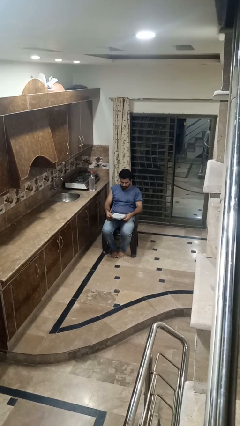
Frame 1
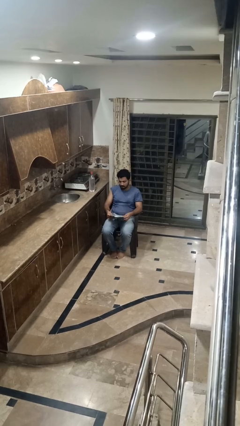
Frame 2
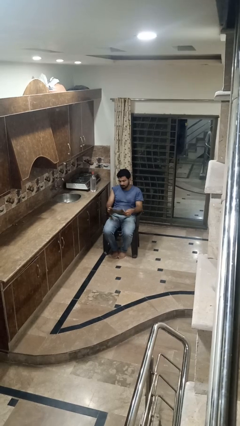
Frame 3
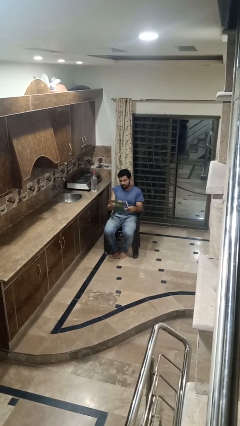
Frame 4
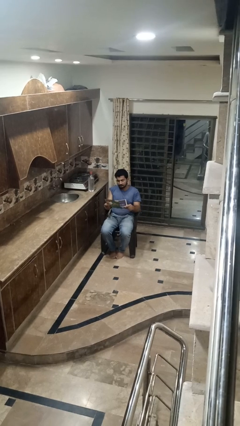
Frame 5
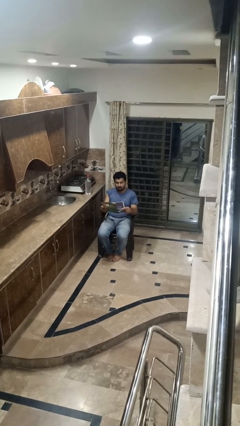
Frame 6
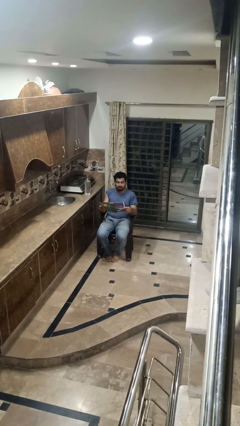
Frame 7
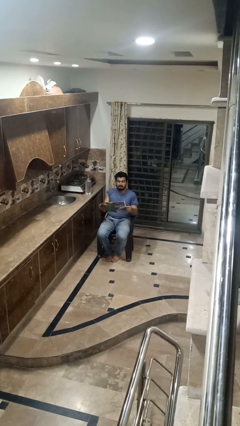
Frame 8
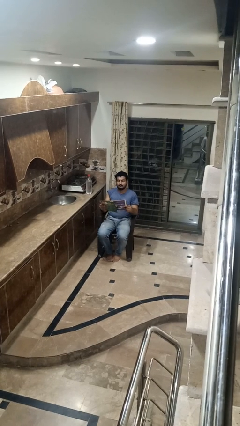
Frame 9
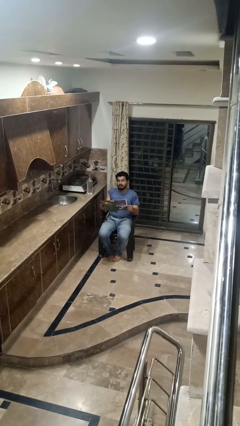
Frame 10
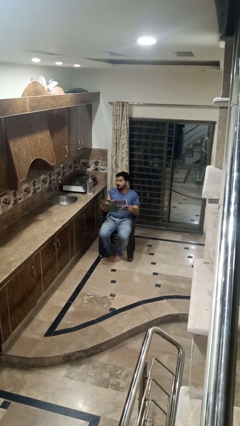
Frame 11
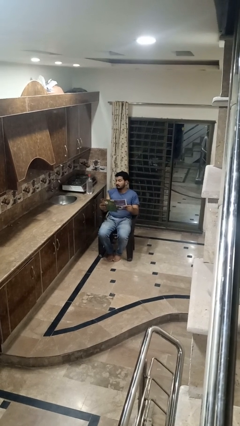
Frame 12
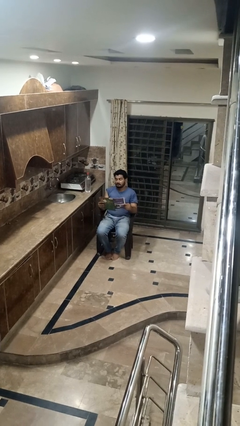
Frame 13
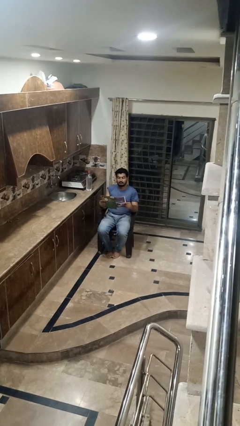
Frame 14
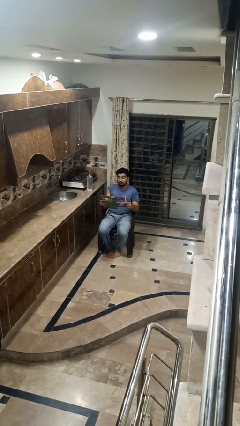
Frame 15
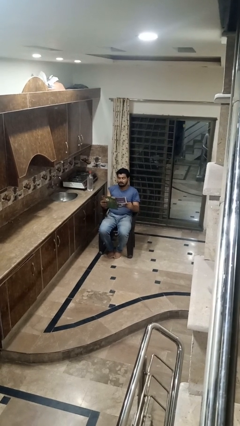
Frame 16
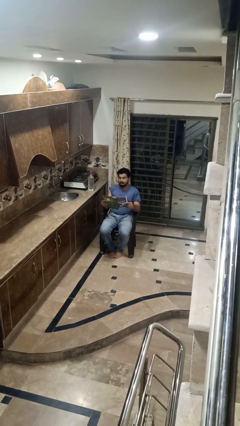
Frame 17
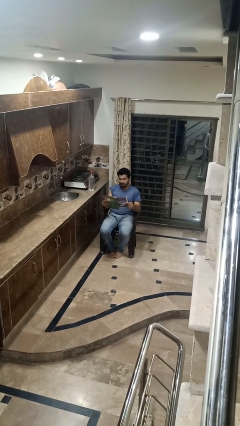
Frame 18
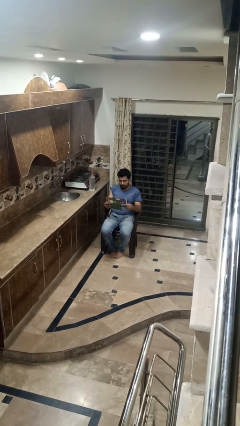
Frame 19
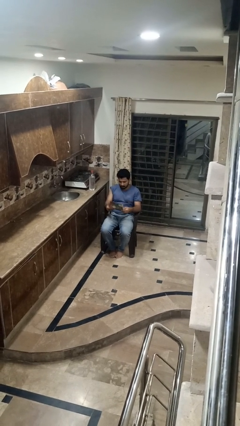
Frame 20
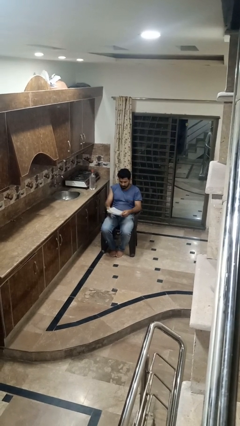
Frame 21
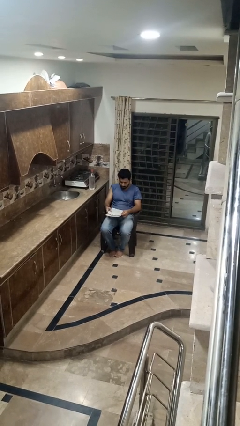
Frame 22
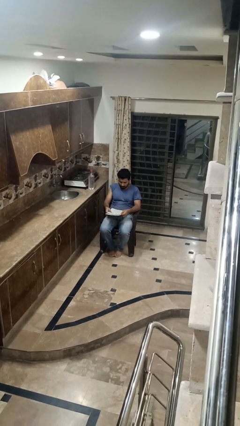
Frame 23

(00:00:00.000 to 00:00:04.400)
person reads newspaper

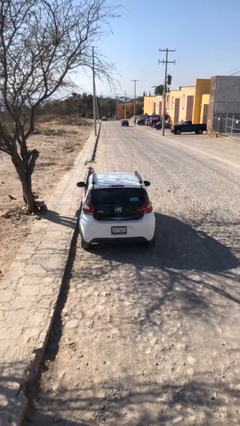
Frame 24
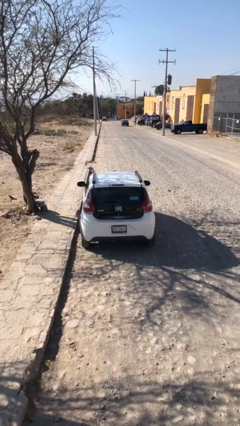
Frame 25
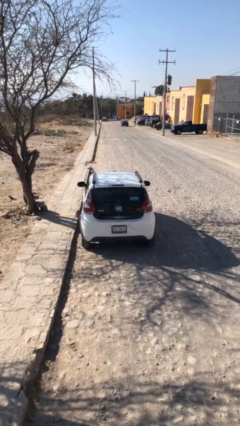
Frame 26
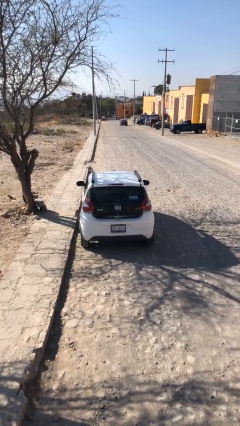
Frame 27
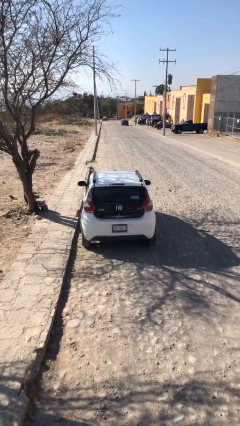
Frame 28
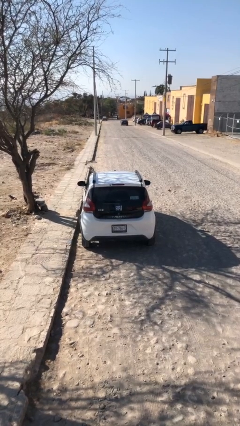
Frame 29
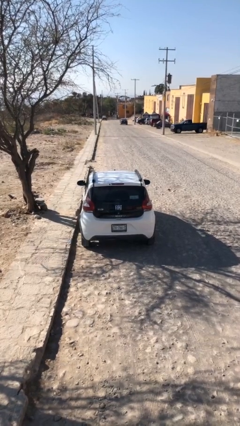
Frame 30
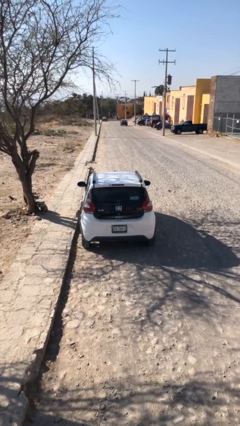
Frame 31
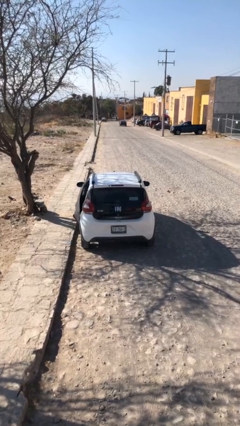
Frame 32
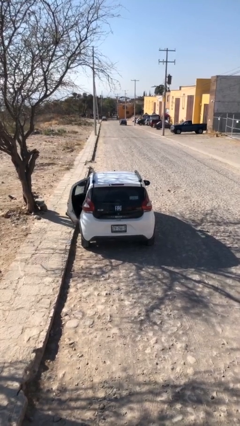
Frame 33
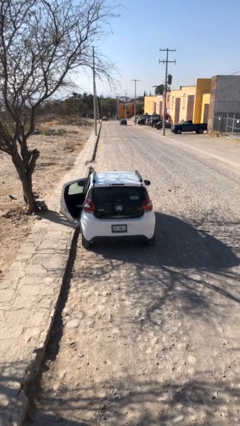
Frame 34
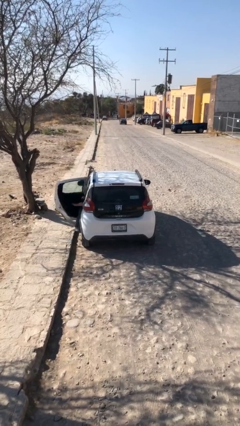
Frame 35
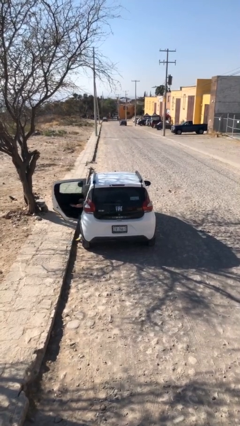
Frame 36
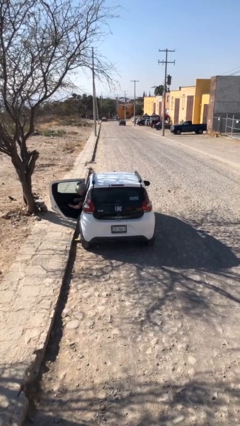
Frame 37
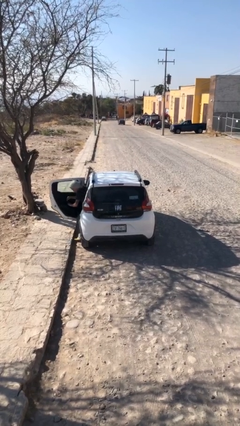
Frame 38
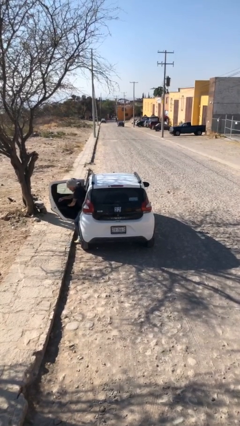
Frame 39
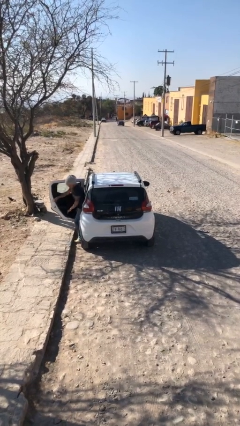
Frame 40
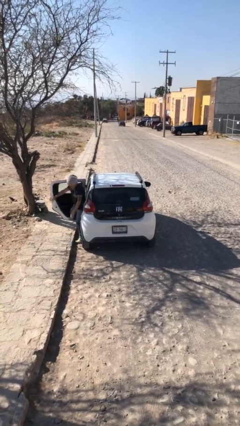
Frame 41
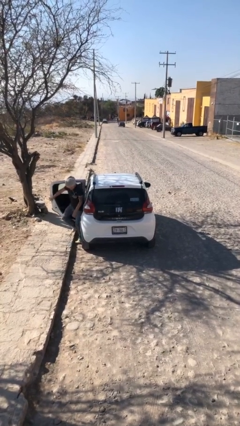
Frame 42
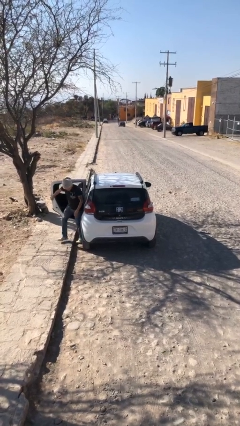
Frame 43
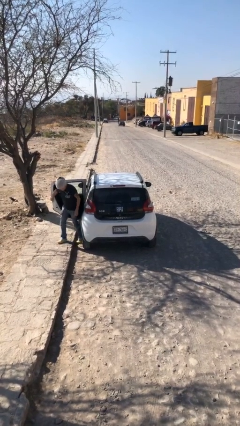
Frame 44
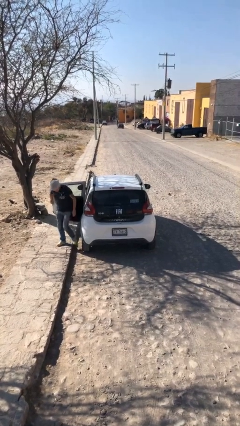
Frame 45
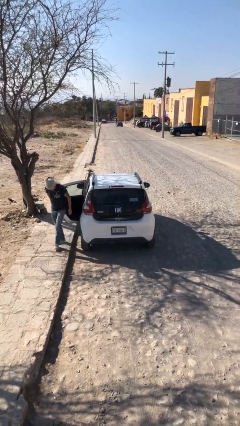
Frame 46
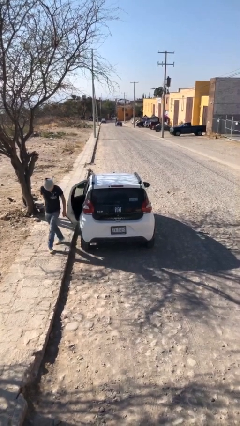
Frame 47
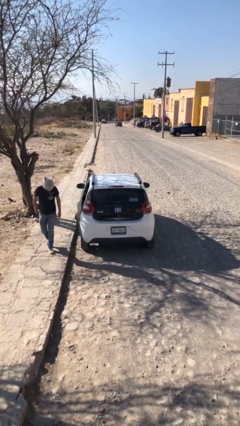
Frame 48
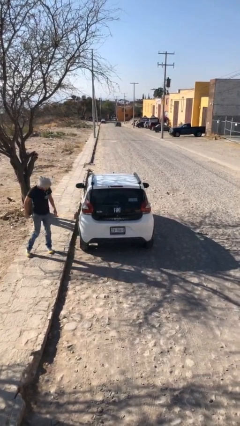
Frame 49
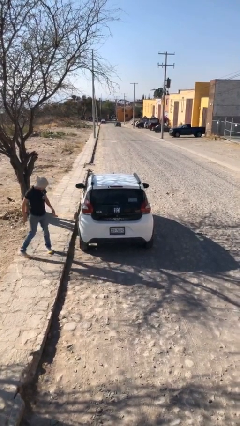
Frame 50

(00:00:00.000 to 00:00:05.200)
car drops off person

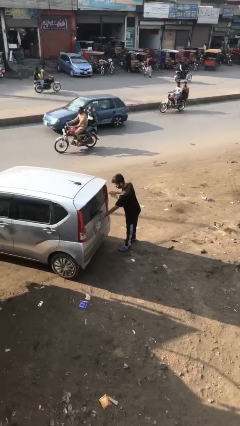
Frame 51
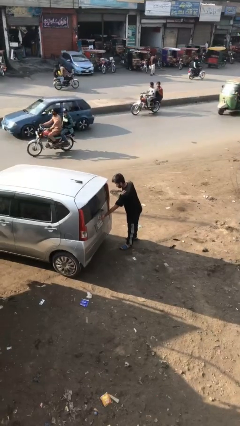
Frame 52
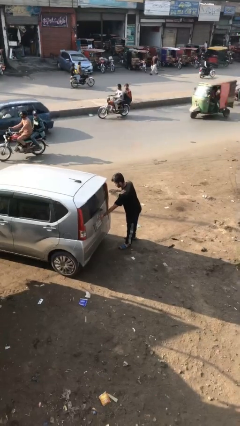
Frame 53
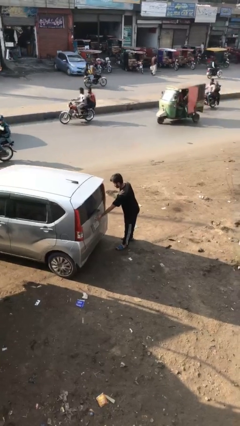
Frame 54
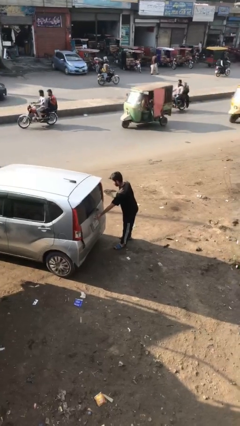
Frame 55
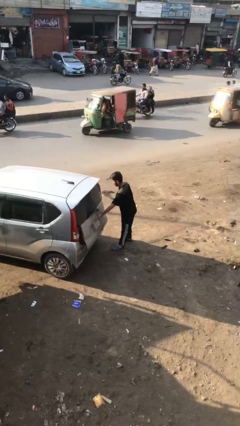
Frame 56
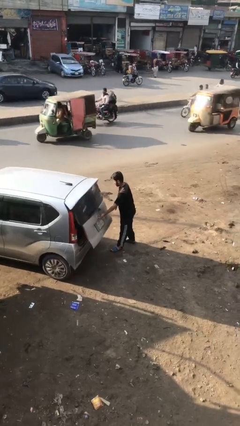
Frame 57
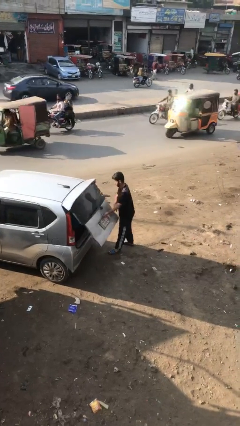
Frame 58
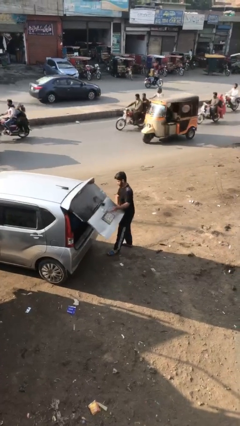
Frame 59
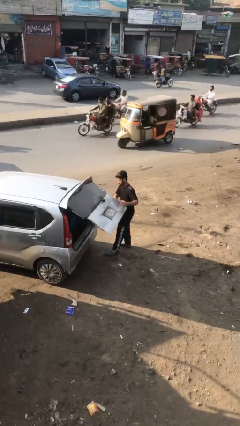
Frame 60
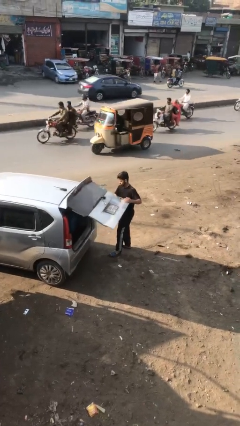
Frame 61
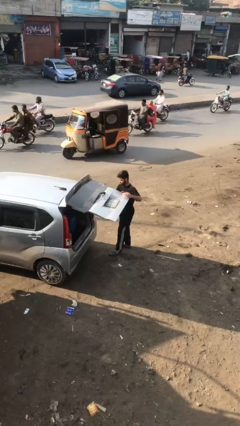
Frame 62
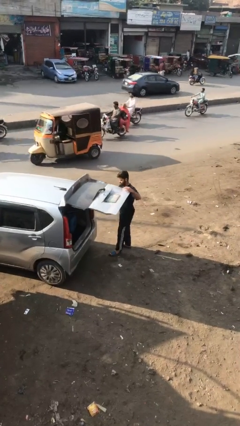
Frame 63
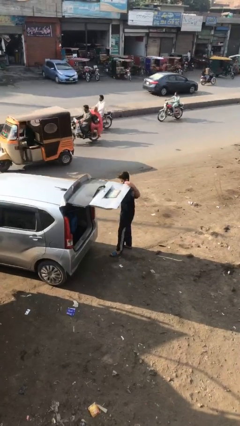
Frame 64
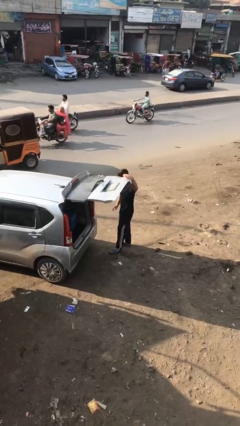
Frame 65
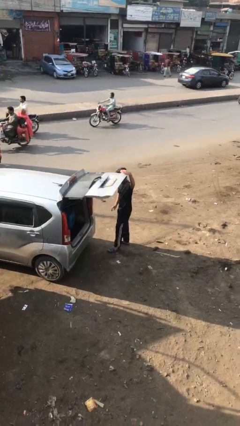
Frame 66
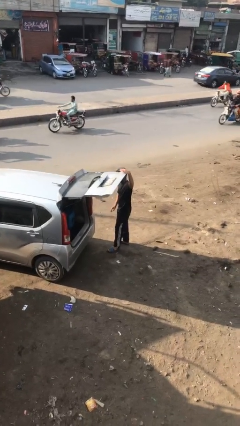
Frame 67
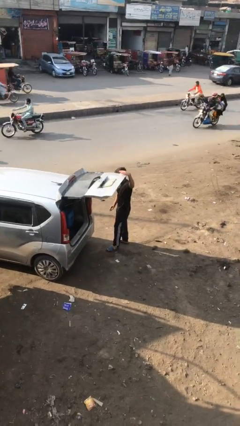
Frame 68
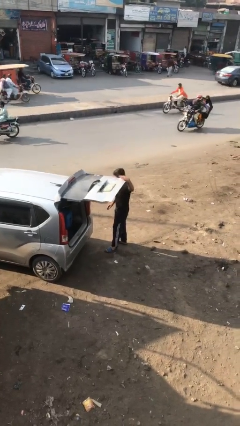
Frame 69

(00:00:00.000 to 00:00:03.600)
person opens car trunk

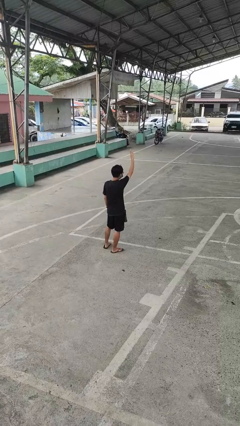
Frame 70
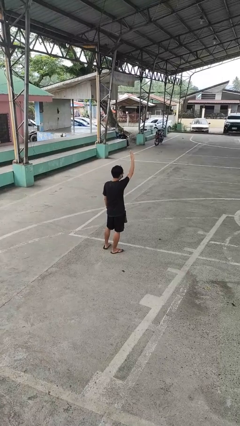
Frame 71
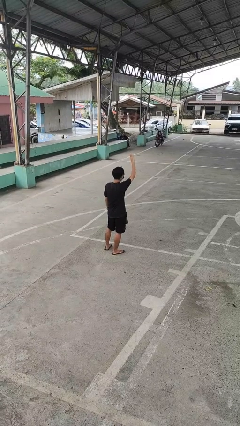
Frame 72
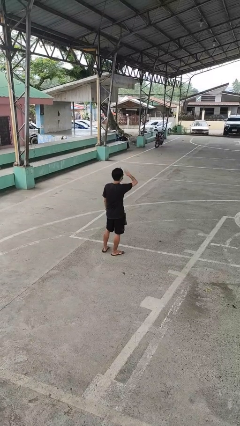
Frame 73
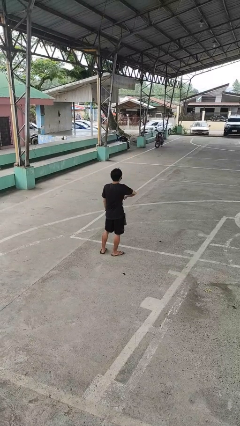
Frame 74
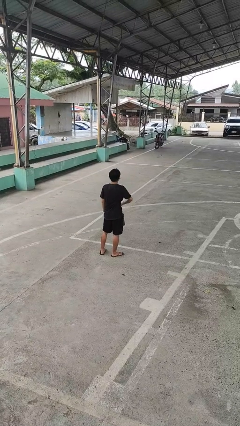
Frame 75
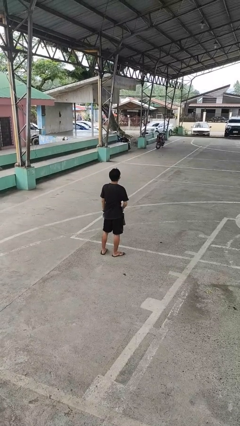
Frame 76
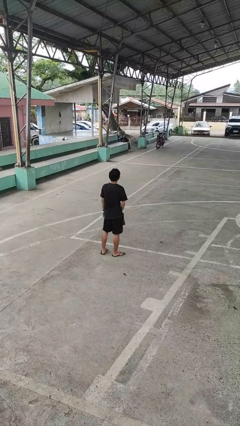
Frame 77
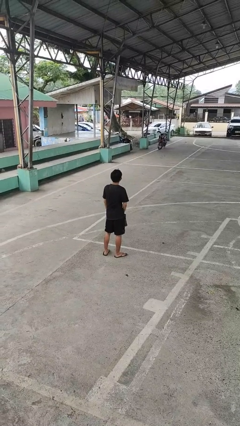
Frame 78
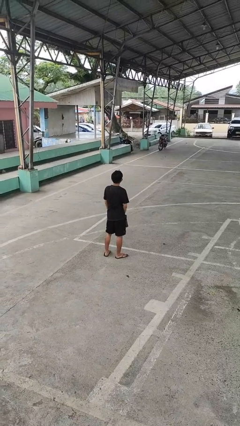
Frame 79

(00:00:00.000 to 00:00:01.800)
person gestures swipe down

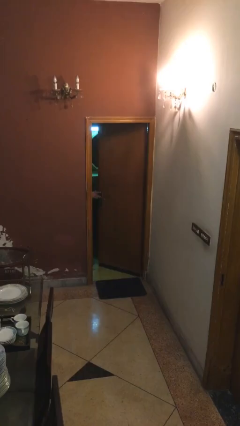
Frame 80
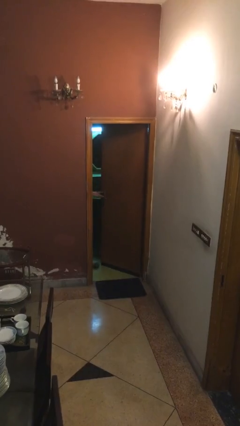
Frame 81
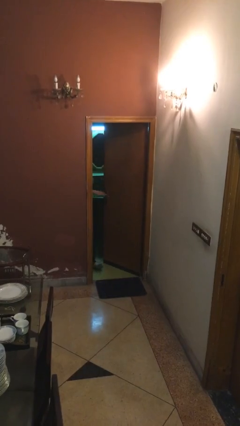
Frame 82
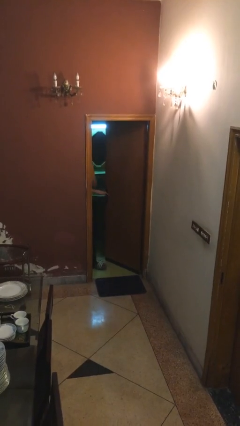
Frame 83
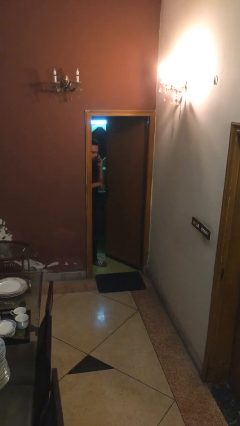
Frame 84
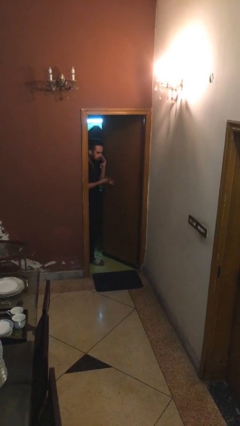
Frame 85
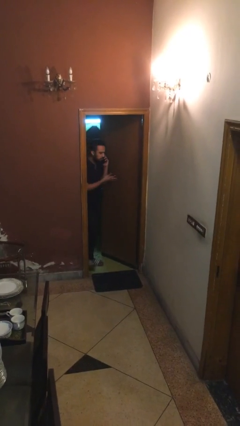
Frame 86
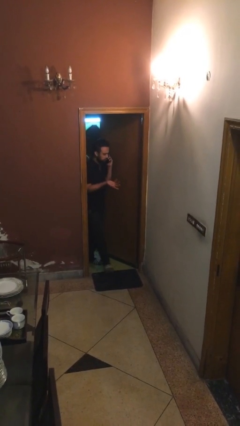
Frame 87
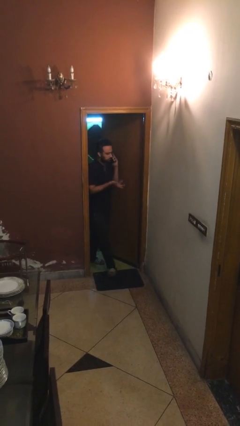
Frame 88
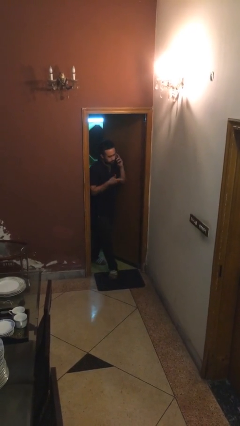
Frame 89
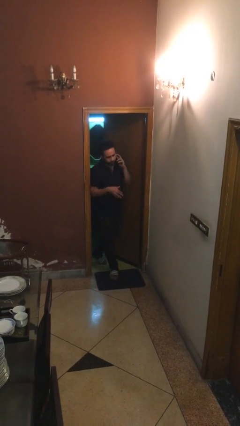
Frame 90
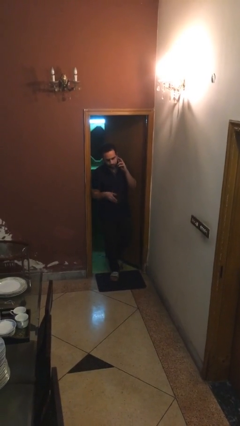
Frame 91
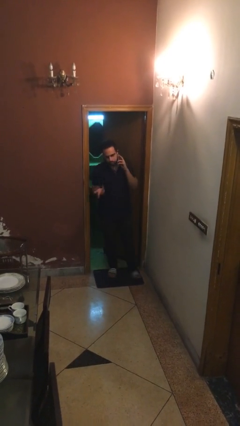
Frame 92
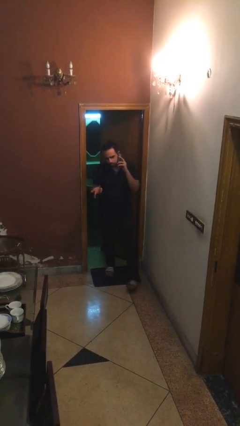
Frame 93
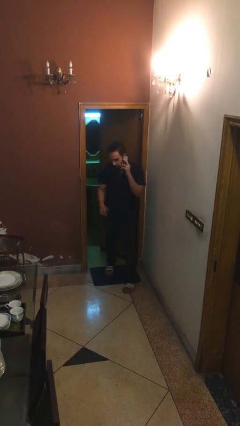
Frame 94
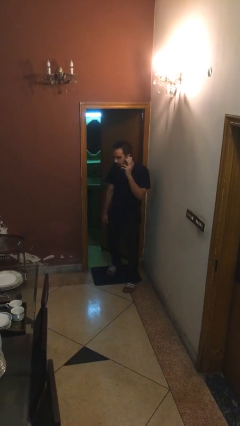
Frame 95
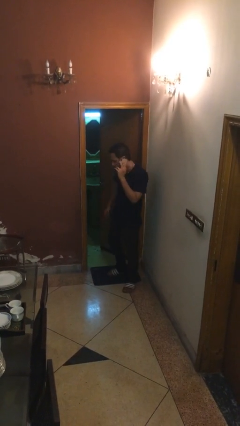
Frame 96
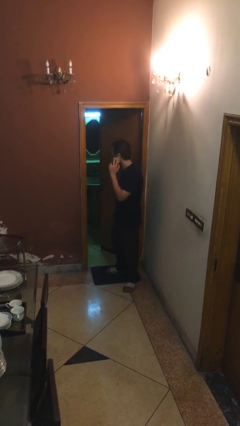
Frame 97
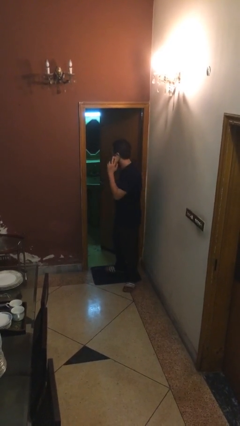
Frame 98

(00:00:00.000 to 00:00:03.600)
person enters scene through structure
